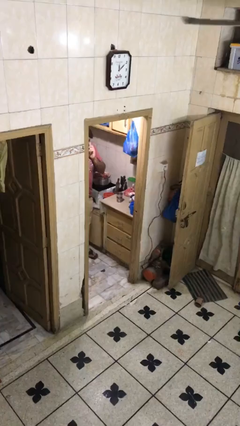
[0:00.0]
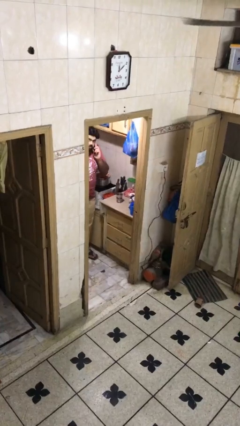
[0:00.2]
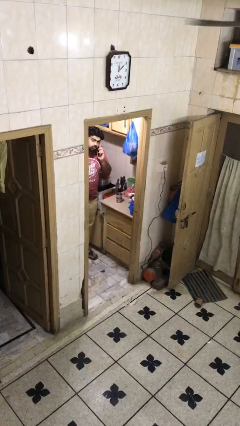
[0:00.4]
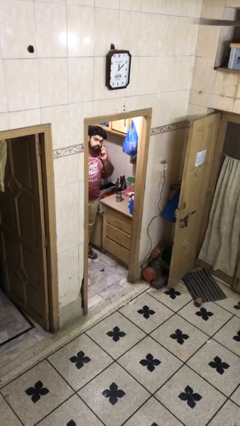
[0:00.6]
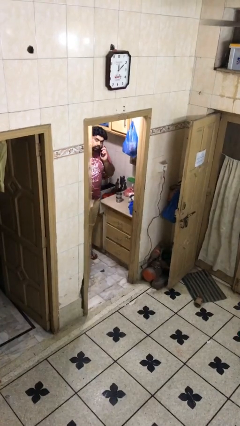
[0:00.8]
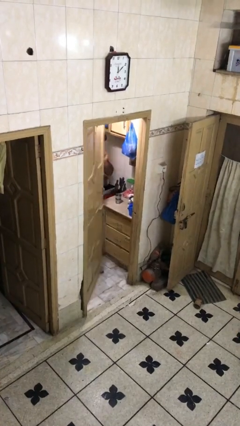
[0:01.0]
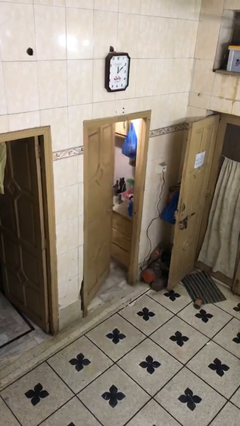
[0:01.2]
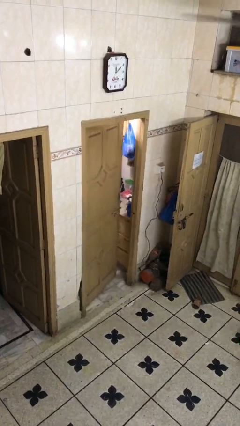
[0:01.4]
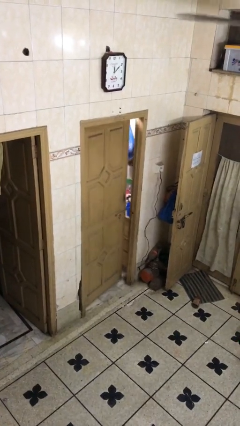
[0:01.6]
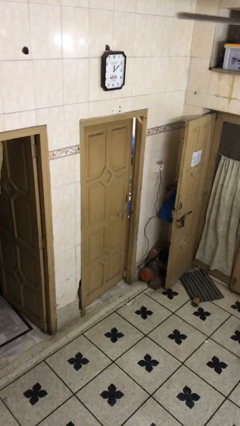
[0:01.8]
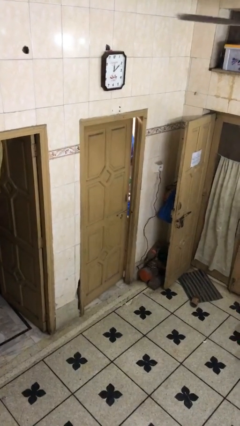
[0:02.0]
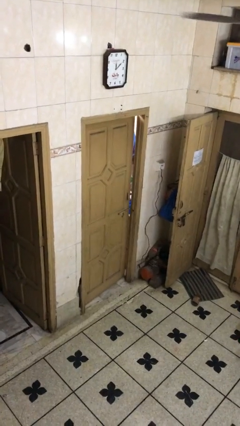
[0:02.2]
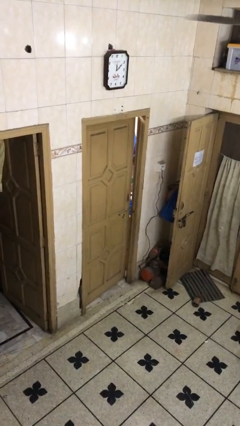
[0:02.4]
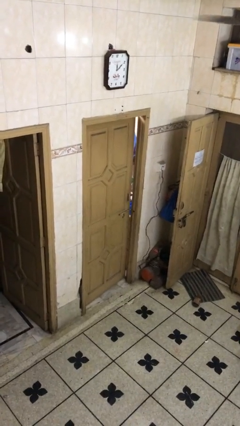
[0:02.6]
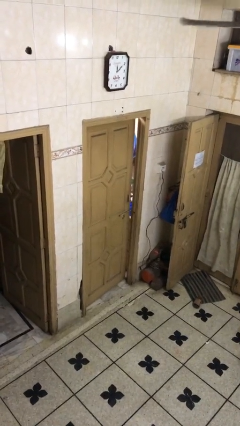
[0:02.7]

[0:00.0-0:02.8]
person closes facility door

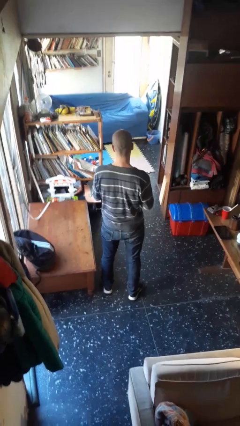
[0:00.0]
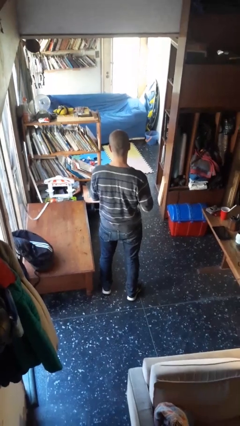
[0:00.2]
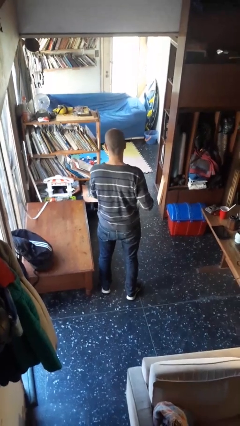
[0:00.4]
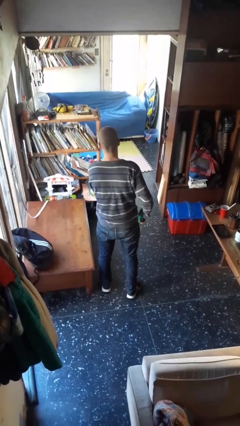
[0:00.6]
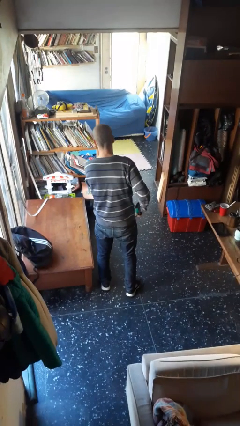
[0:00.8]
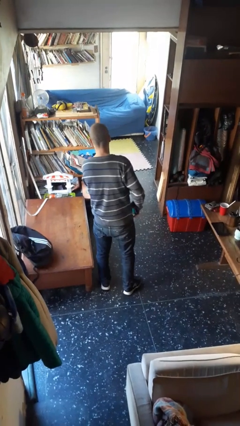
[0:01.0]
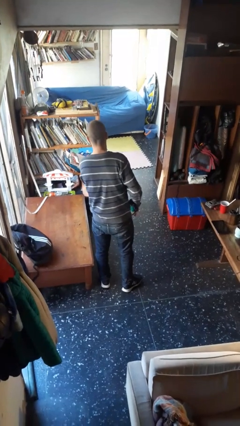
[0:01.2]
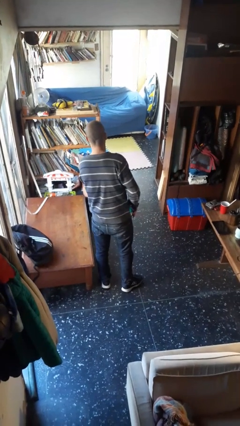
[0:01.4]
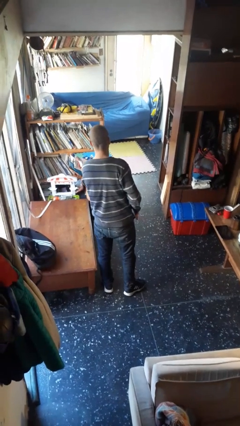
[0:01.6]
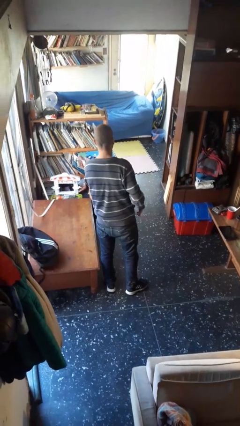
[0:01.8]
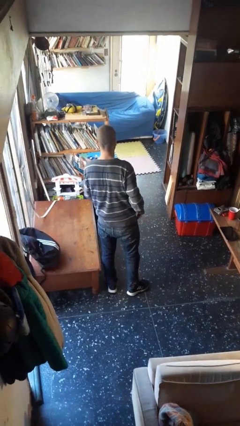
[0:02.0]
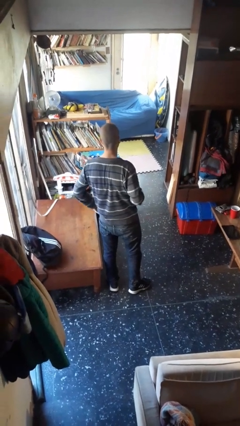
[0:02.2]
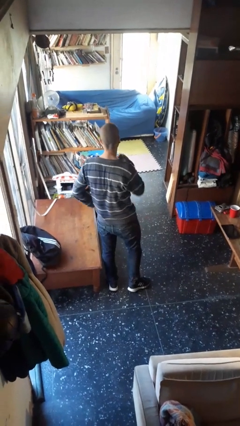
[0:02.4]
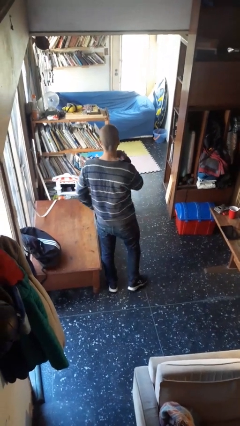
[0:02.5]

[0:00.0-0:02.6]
person puts phone into pocket

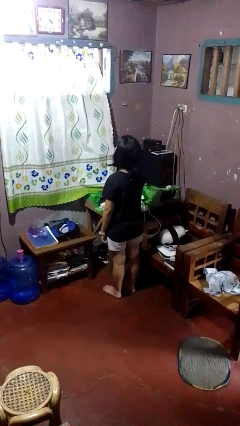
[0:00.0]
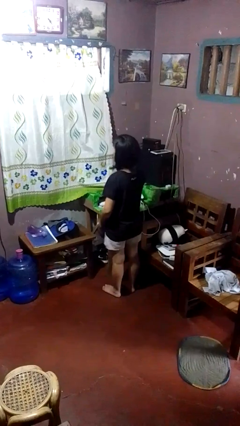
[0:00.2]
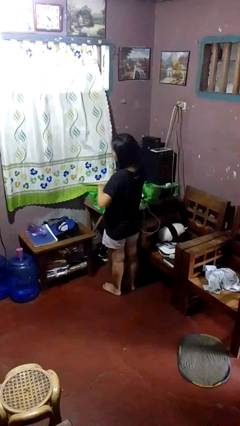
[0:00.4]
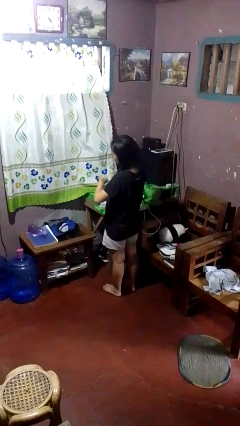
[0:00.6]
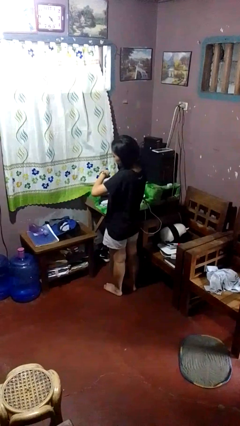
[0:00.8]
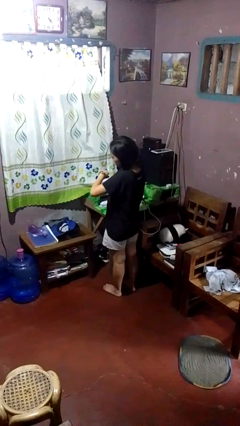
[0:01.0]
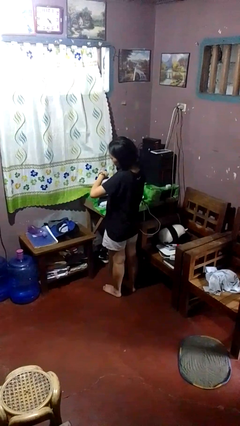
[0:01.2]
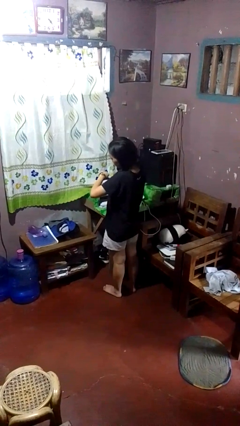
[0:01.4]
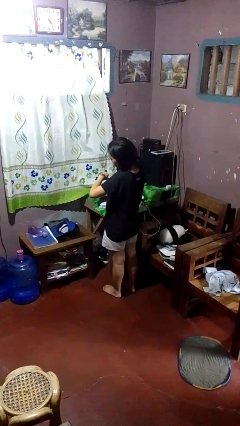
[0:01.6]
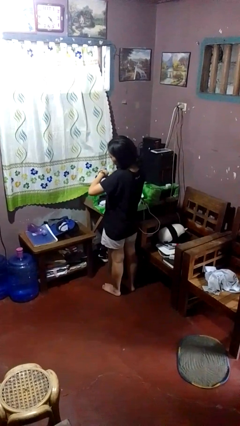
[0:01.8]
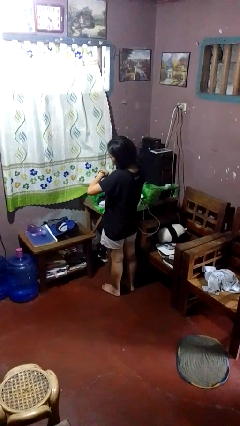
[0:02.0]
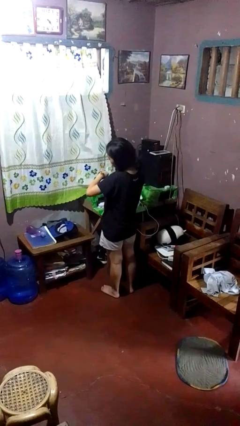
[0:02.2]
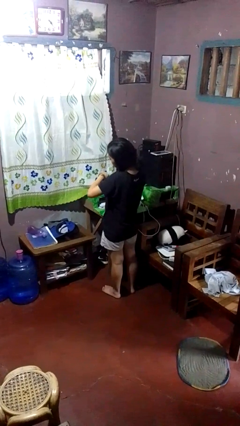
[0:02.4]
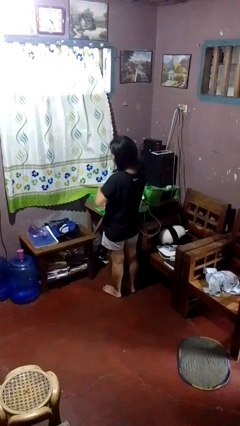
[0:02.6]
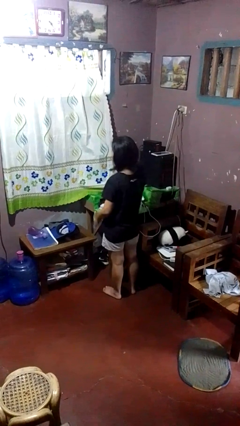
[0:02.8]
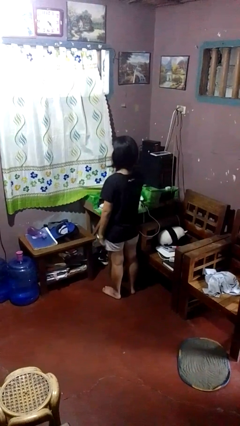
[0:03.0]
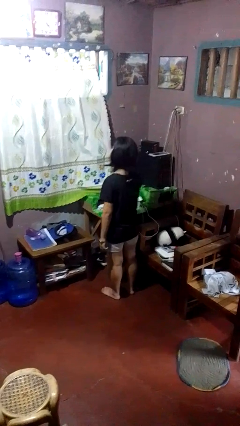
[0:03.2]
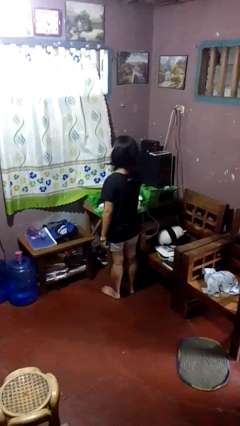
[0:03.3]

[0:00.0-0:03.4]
person looks at wristwatch

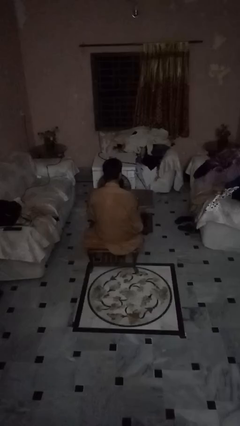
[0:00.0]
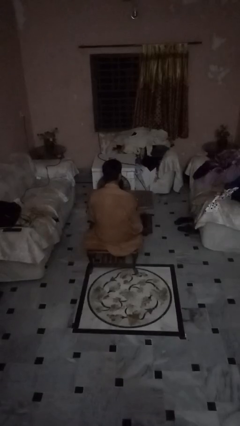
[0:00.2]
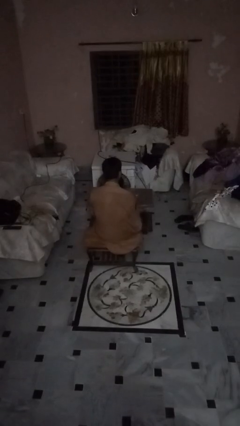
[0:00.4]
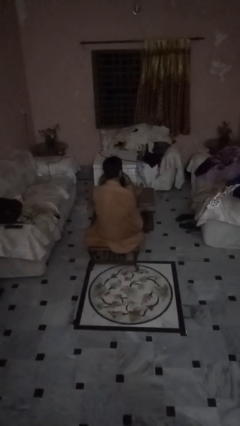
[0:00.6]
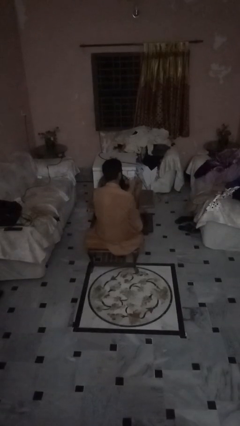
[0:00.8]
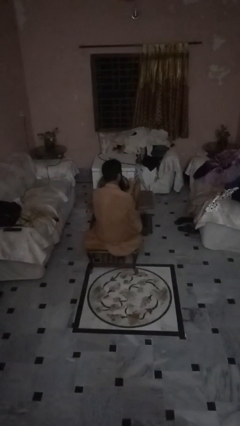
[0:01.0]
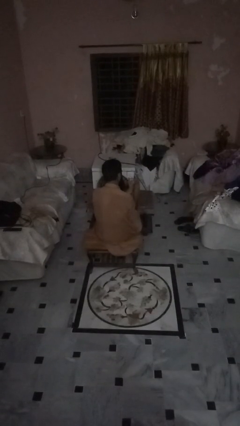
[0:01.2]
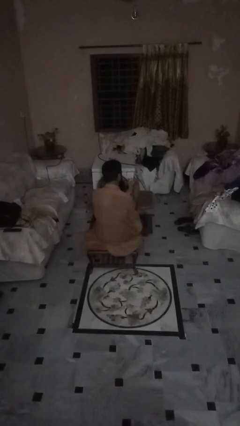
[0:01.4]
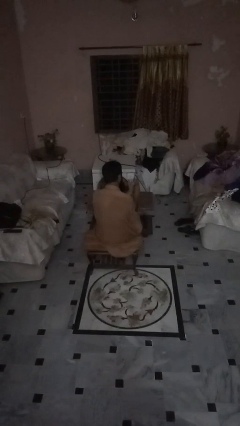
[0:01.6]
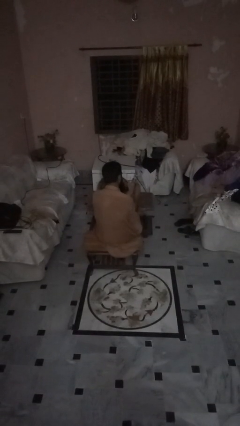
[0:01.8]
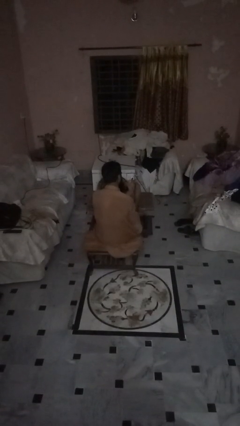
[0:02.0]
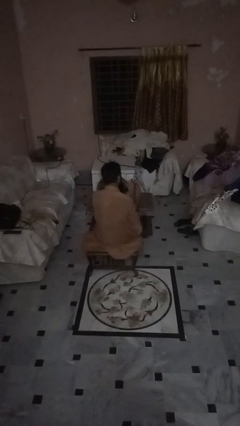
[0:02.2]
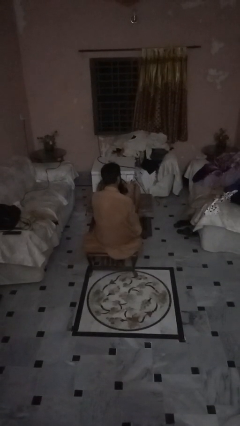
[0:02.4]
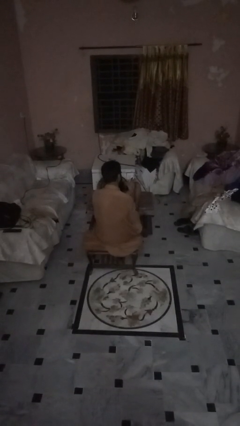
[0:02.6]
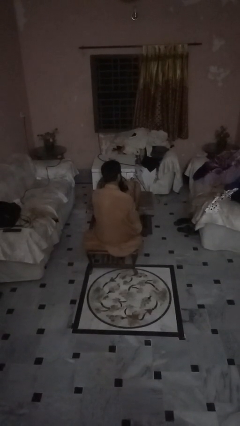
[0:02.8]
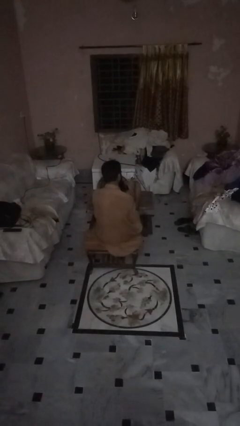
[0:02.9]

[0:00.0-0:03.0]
person clips fingernails

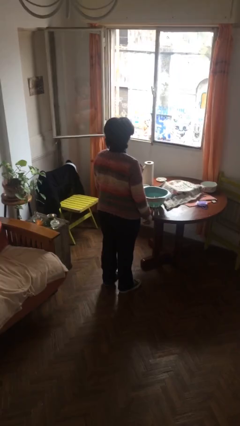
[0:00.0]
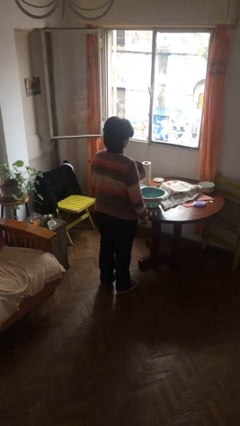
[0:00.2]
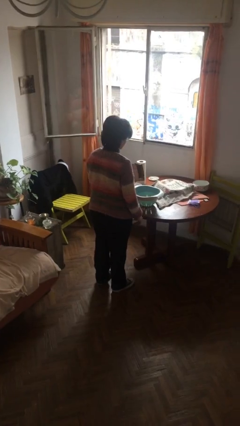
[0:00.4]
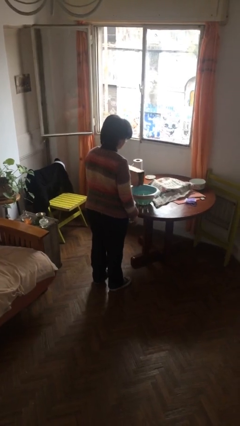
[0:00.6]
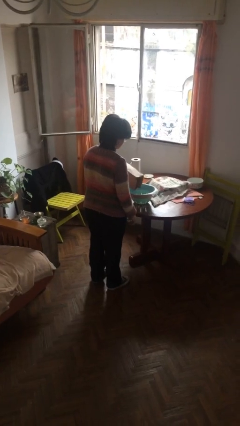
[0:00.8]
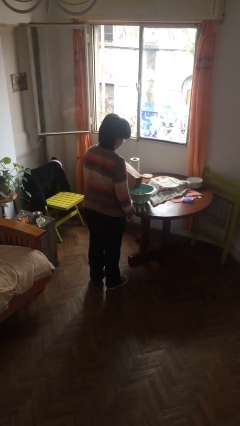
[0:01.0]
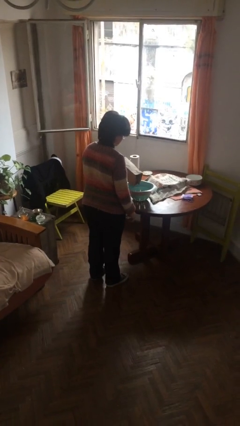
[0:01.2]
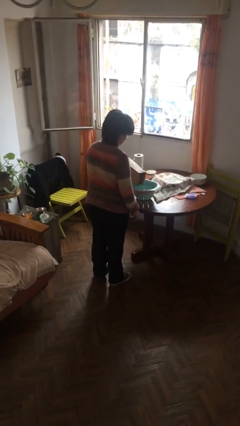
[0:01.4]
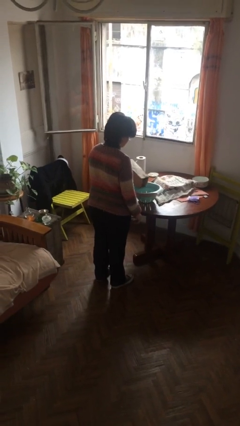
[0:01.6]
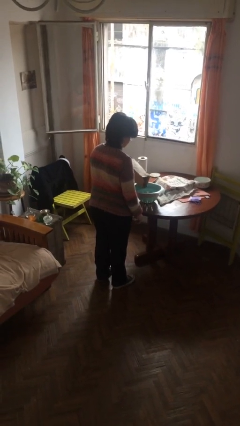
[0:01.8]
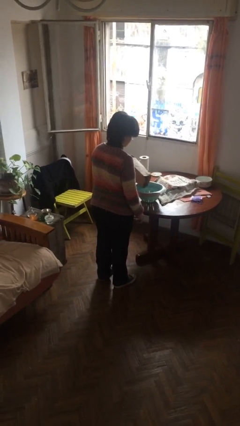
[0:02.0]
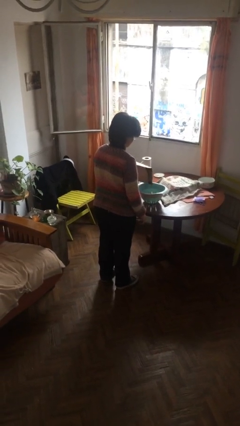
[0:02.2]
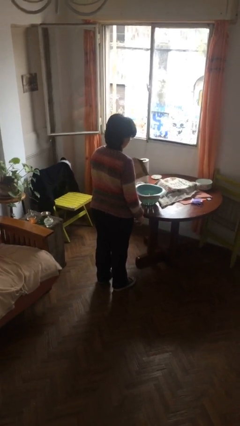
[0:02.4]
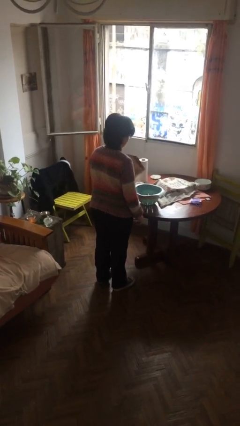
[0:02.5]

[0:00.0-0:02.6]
person pours into bowl

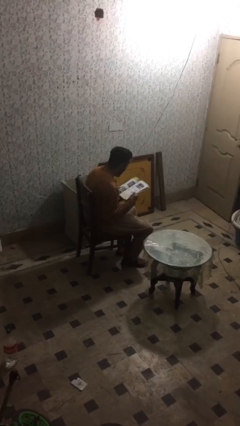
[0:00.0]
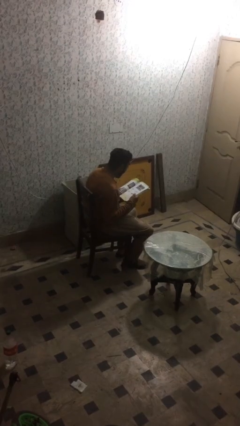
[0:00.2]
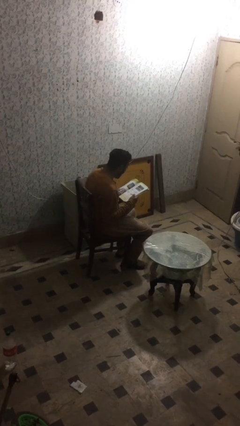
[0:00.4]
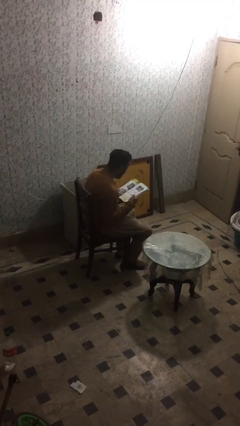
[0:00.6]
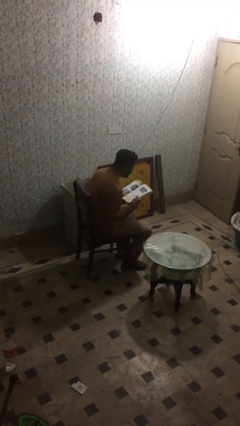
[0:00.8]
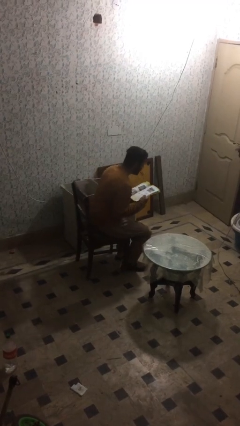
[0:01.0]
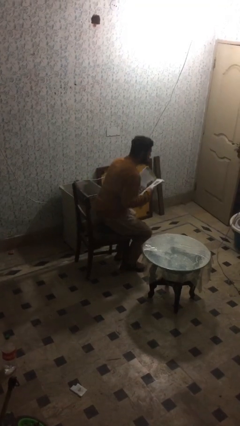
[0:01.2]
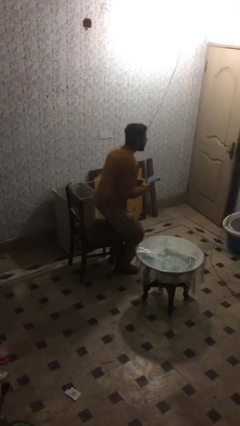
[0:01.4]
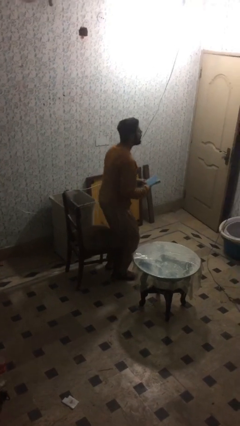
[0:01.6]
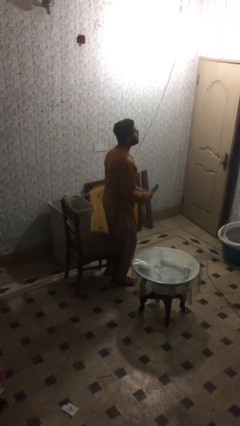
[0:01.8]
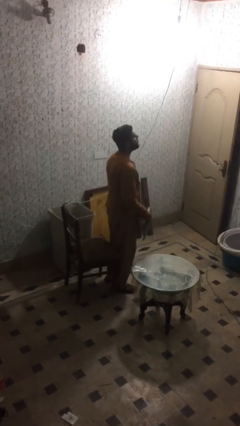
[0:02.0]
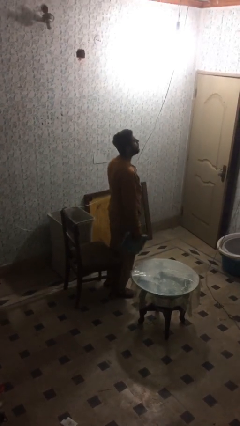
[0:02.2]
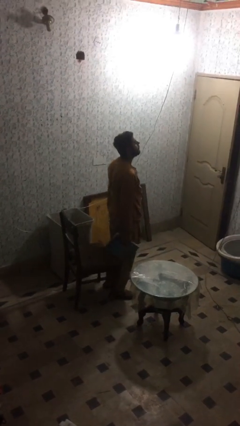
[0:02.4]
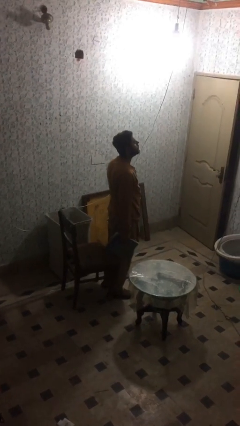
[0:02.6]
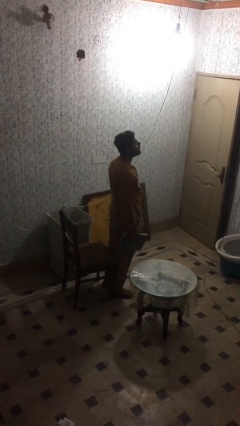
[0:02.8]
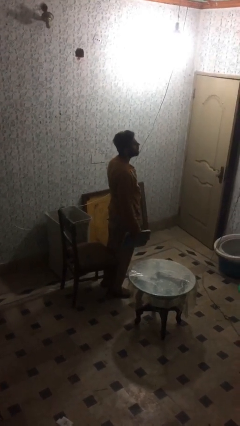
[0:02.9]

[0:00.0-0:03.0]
person stands up

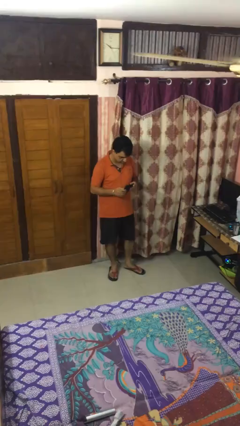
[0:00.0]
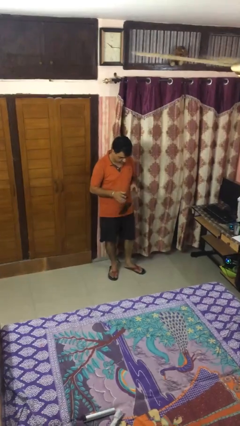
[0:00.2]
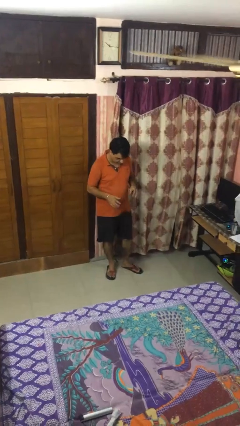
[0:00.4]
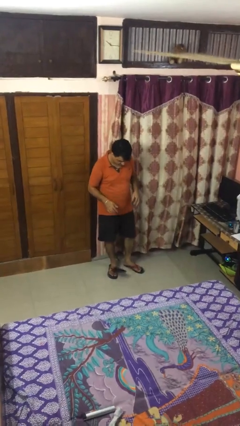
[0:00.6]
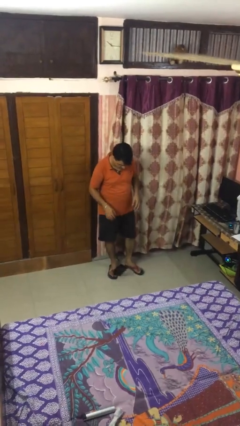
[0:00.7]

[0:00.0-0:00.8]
person drops object
